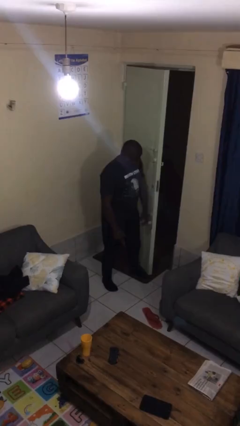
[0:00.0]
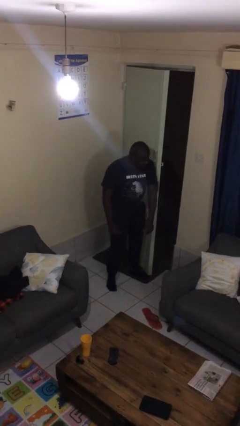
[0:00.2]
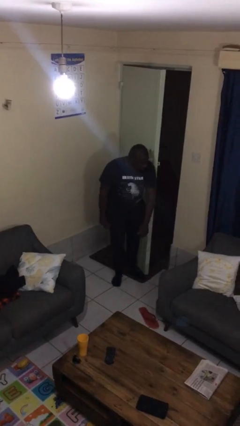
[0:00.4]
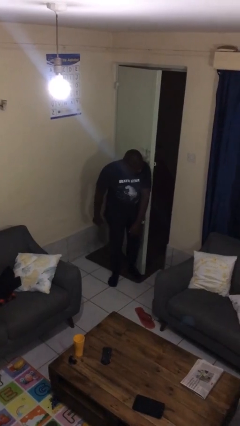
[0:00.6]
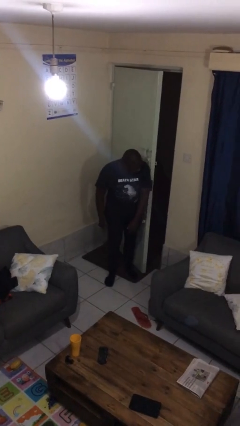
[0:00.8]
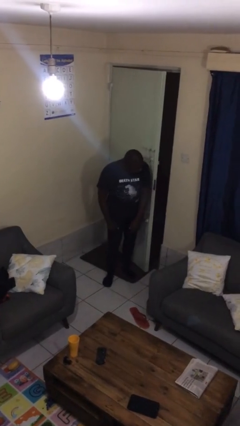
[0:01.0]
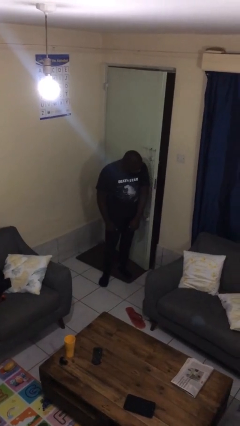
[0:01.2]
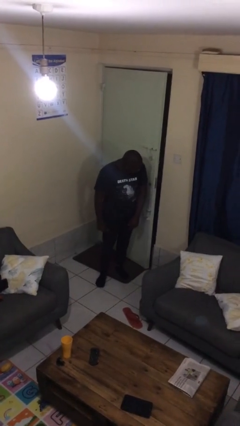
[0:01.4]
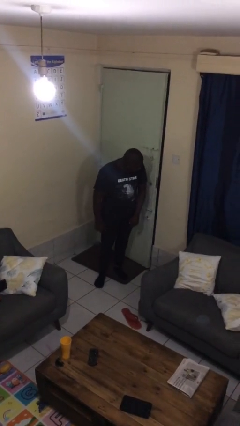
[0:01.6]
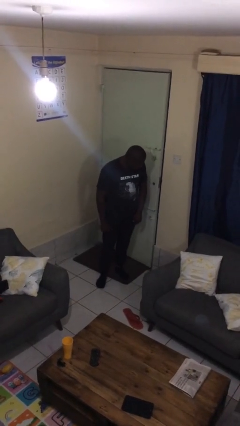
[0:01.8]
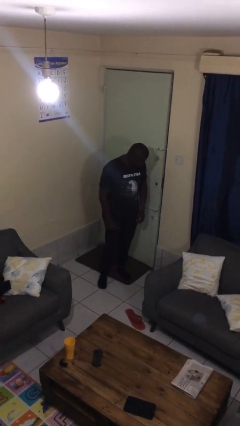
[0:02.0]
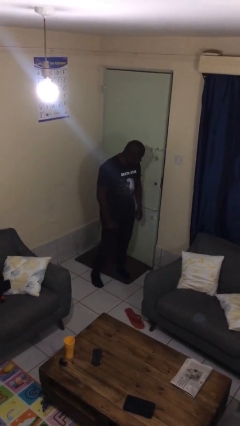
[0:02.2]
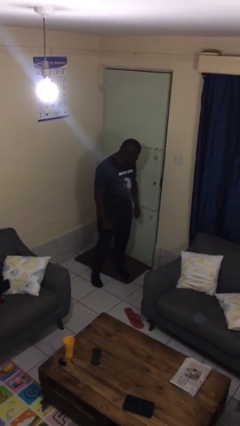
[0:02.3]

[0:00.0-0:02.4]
person closes door with hip

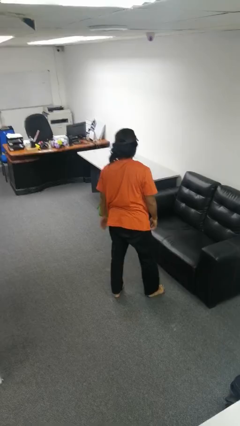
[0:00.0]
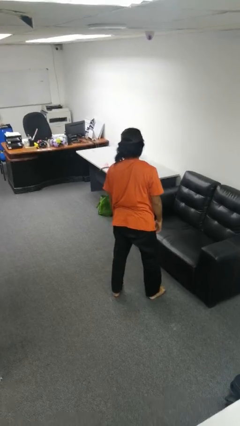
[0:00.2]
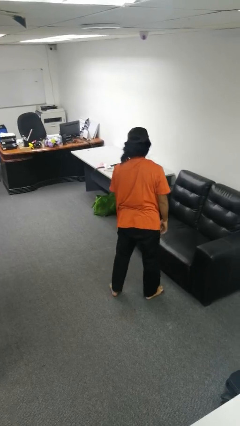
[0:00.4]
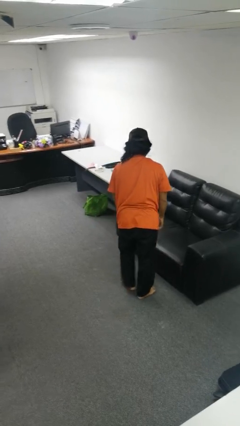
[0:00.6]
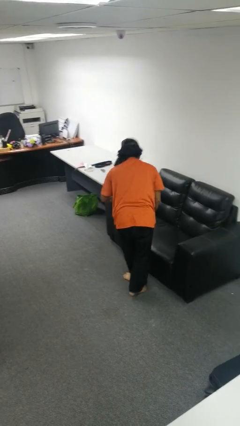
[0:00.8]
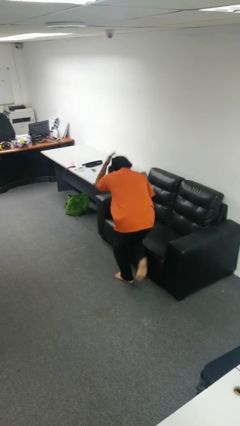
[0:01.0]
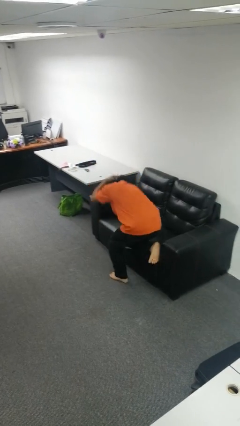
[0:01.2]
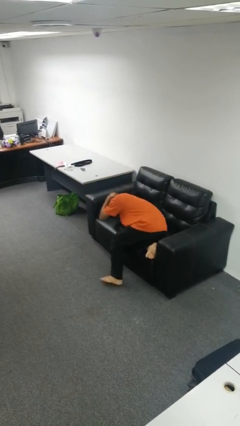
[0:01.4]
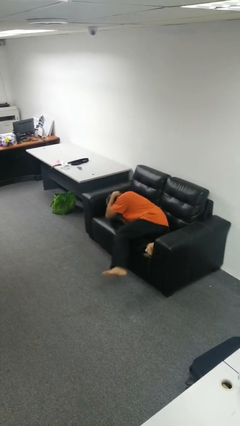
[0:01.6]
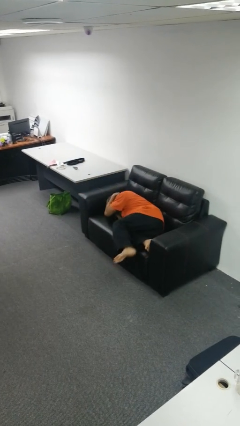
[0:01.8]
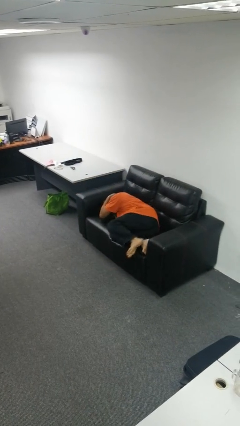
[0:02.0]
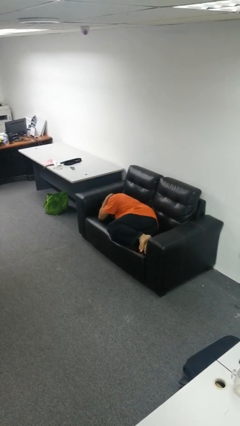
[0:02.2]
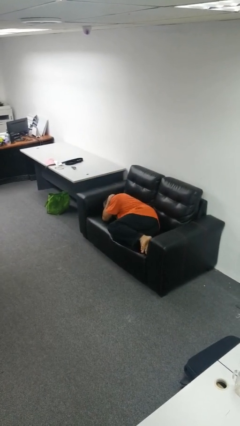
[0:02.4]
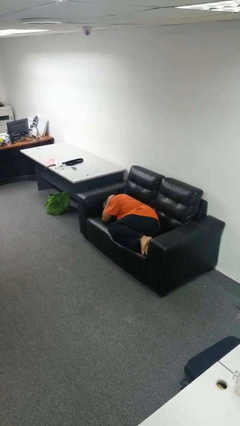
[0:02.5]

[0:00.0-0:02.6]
person lies down on couch

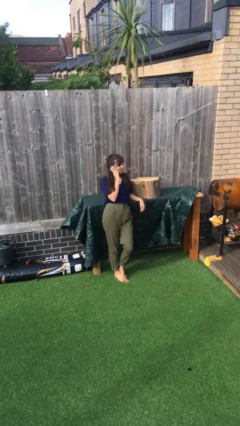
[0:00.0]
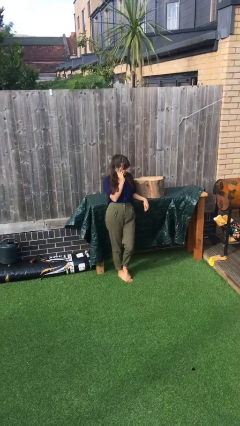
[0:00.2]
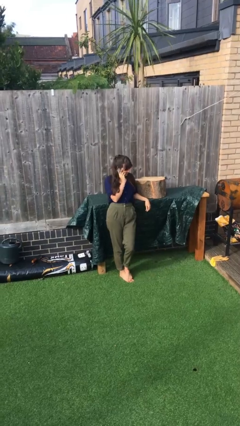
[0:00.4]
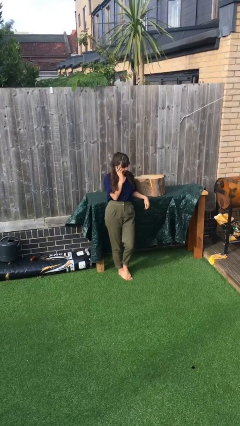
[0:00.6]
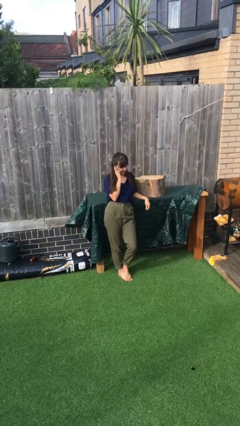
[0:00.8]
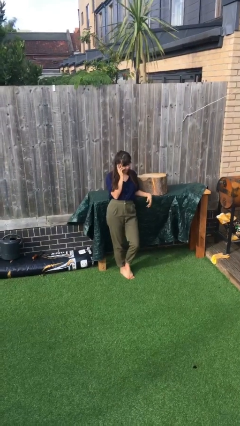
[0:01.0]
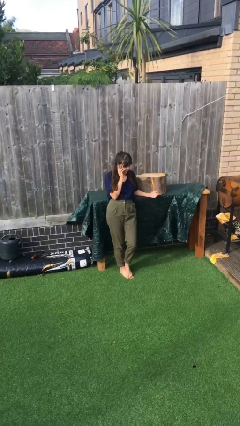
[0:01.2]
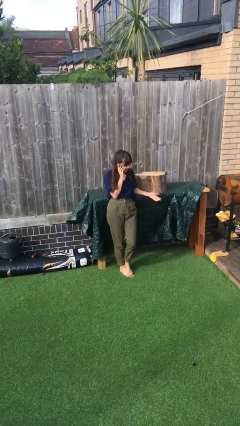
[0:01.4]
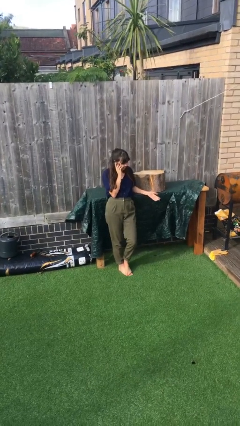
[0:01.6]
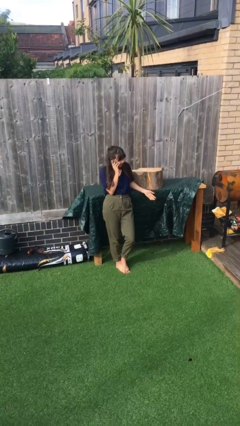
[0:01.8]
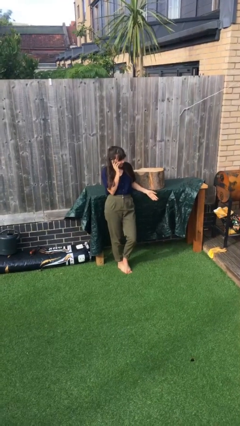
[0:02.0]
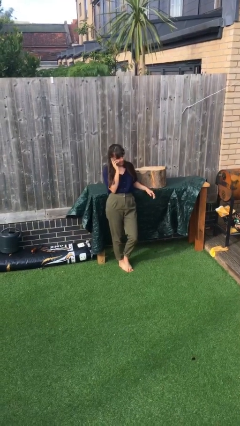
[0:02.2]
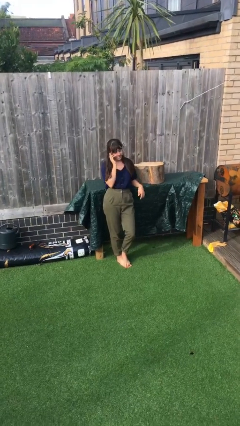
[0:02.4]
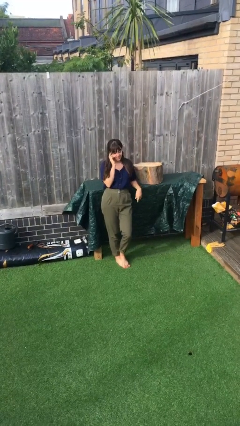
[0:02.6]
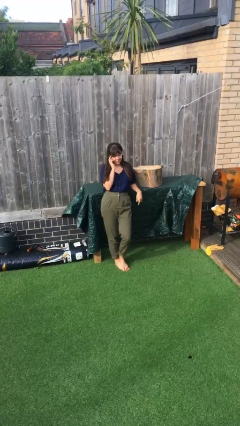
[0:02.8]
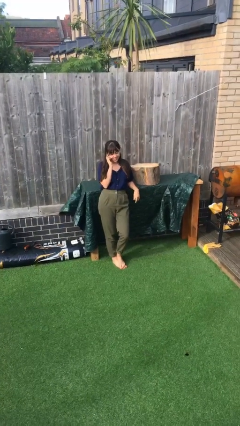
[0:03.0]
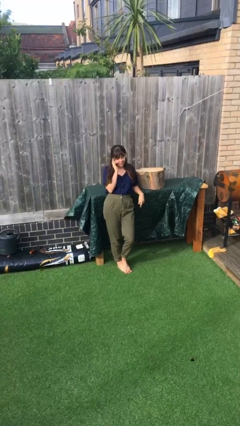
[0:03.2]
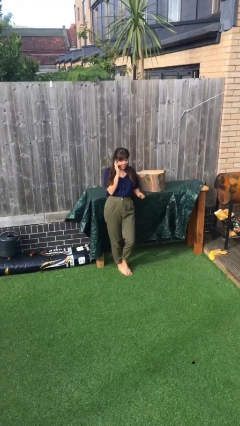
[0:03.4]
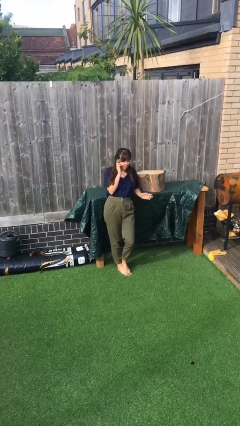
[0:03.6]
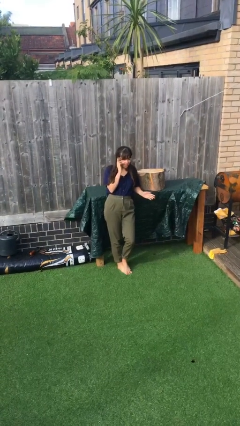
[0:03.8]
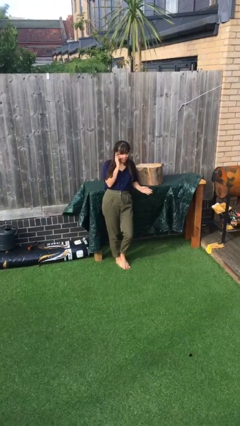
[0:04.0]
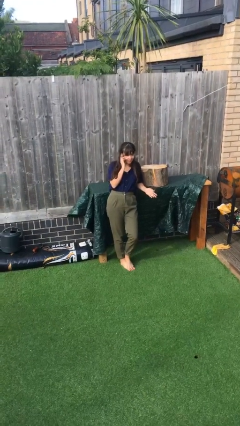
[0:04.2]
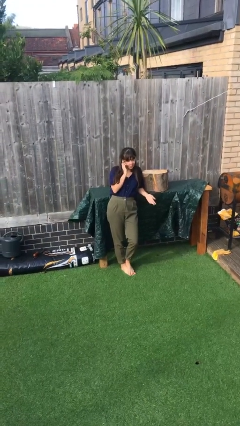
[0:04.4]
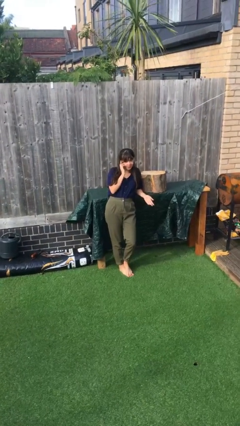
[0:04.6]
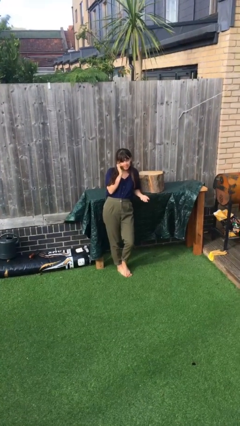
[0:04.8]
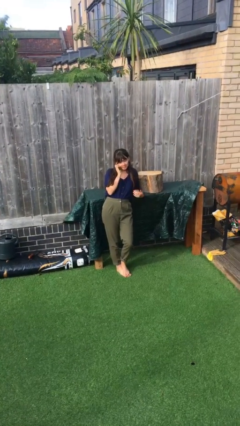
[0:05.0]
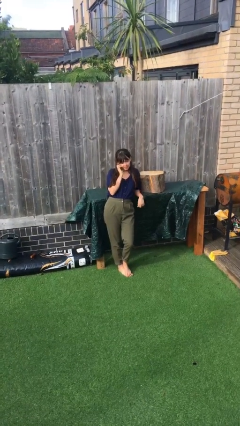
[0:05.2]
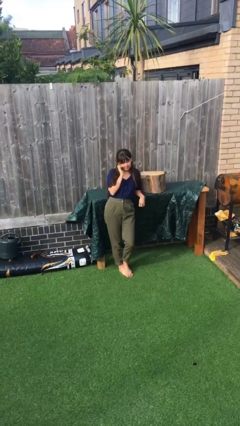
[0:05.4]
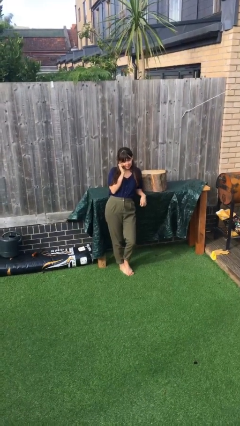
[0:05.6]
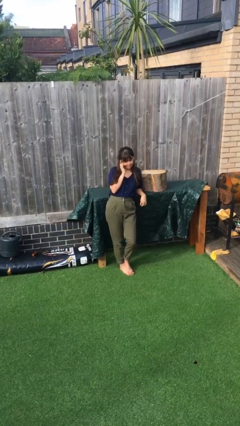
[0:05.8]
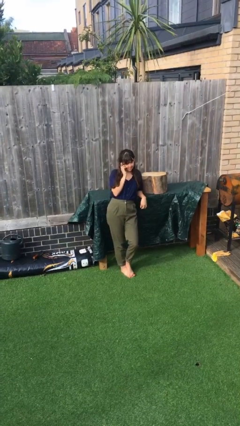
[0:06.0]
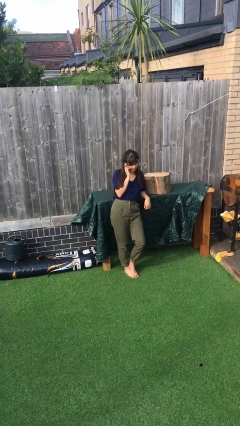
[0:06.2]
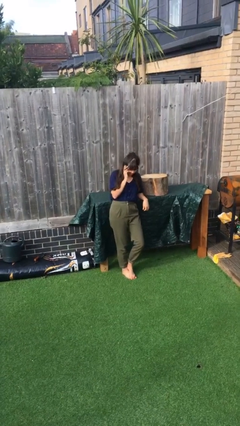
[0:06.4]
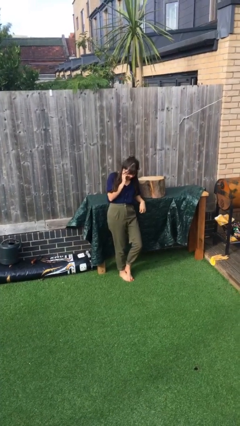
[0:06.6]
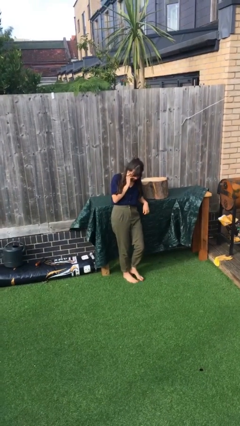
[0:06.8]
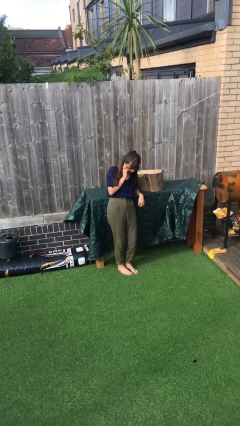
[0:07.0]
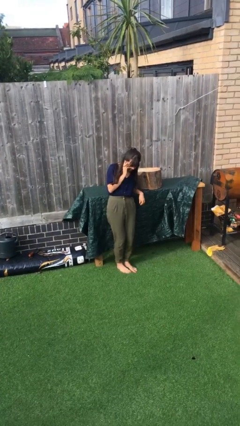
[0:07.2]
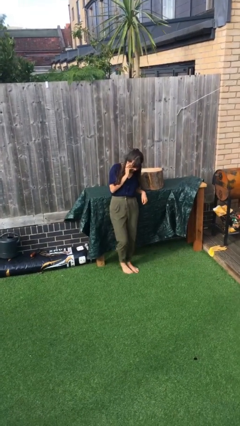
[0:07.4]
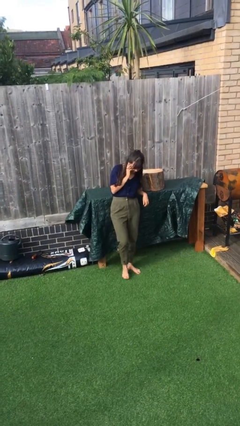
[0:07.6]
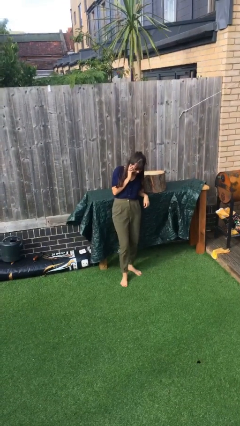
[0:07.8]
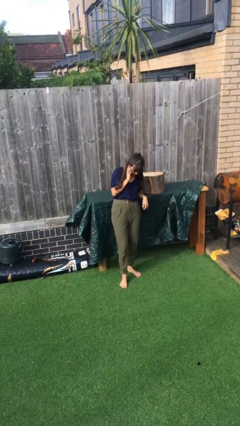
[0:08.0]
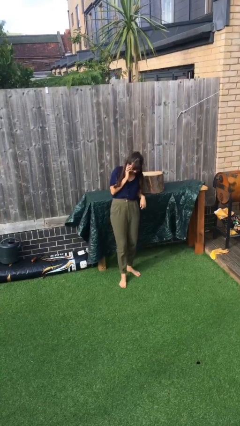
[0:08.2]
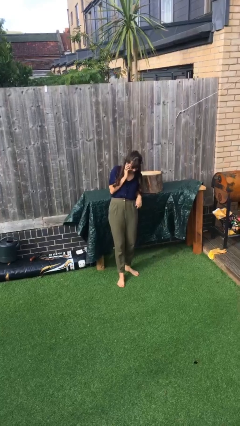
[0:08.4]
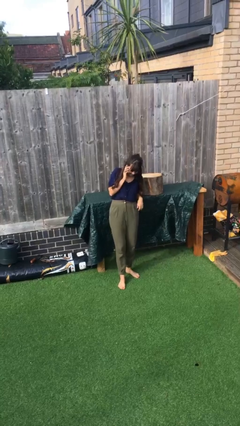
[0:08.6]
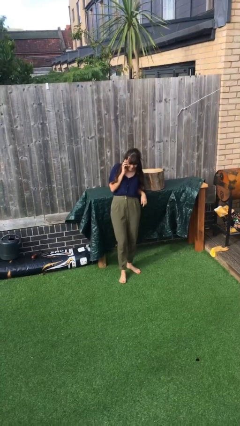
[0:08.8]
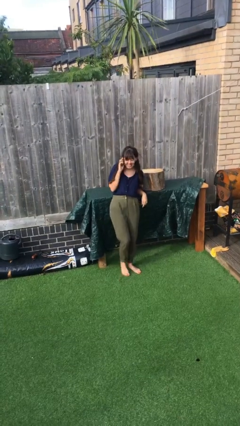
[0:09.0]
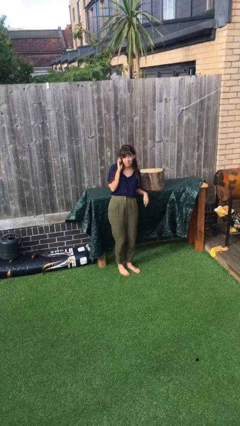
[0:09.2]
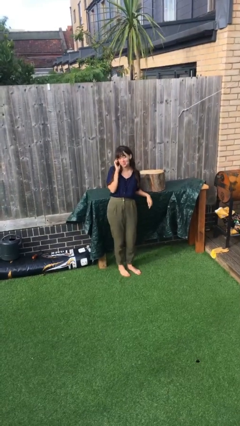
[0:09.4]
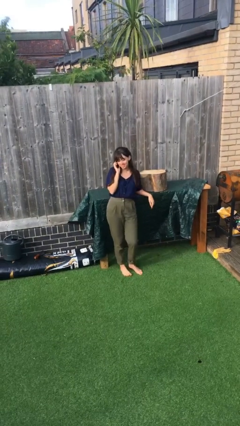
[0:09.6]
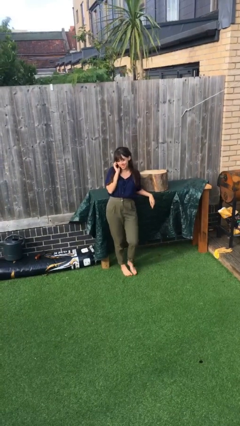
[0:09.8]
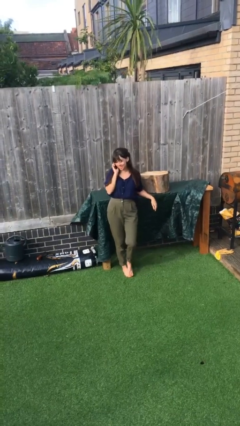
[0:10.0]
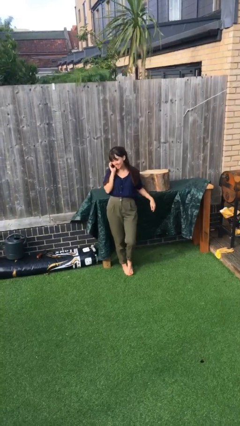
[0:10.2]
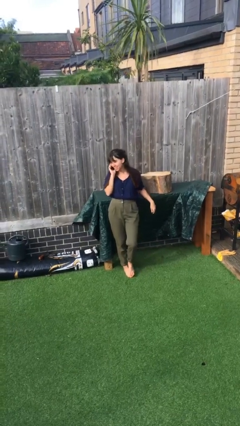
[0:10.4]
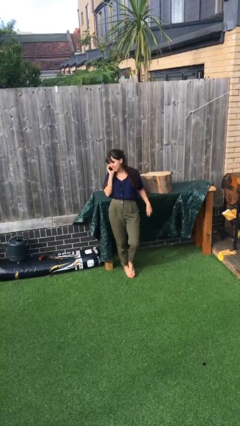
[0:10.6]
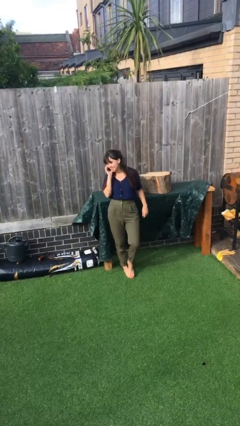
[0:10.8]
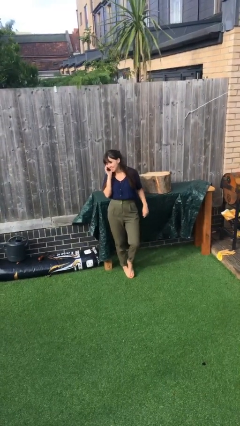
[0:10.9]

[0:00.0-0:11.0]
person talks on phone

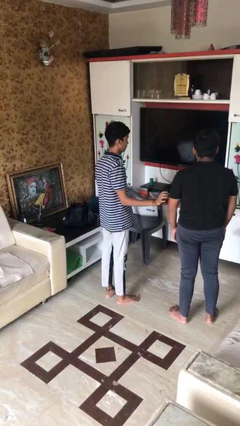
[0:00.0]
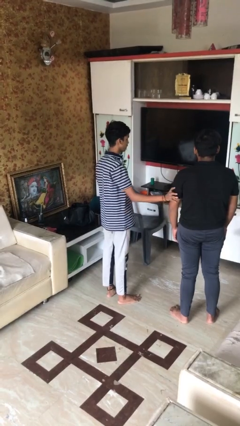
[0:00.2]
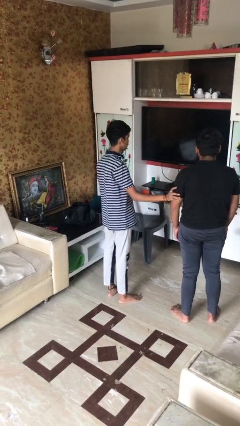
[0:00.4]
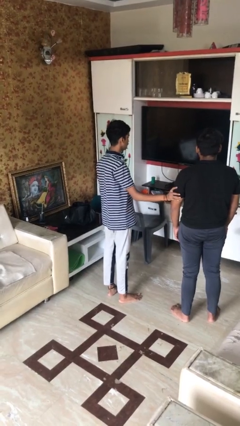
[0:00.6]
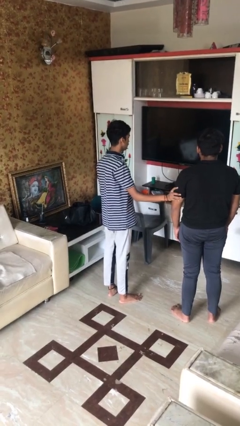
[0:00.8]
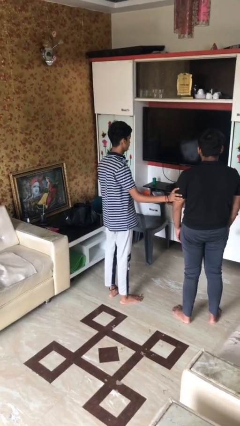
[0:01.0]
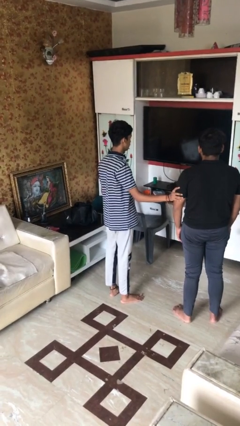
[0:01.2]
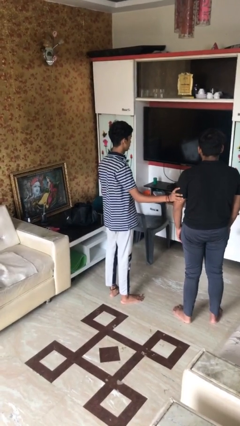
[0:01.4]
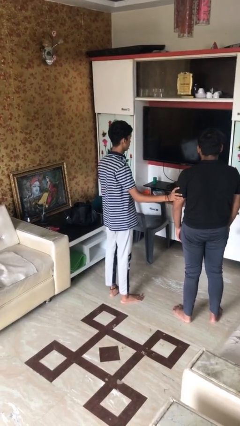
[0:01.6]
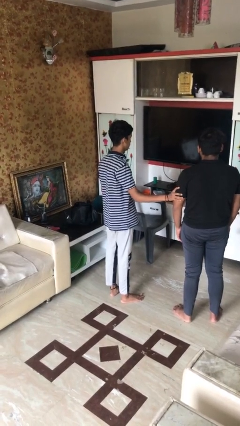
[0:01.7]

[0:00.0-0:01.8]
person grabs person by bicep
